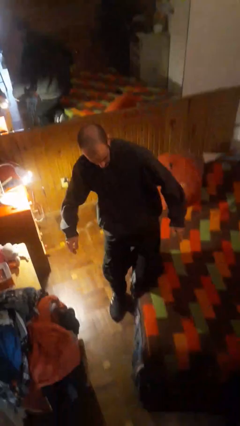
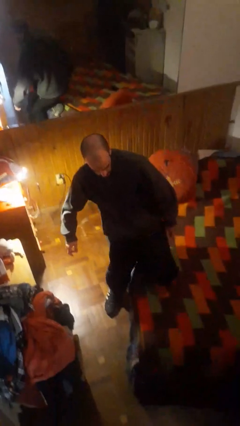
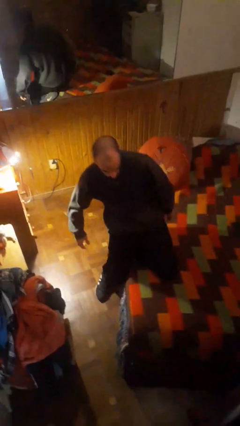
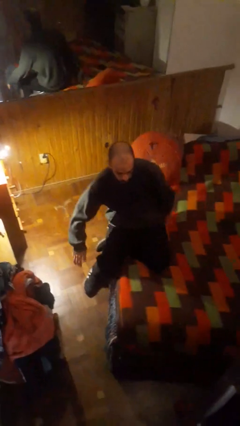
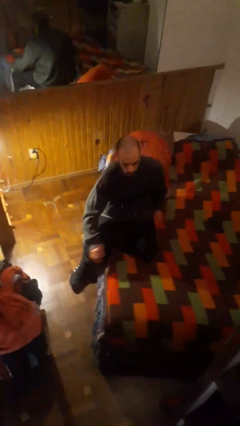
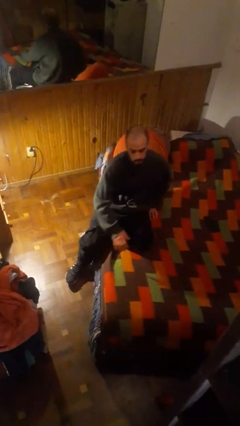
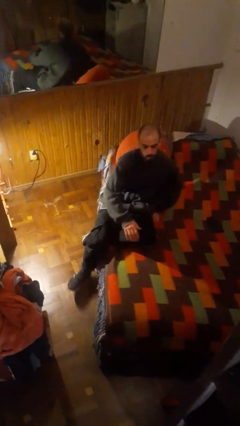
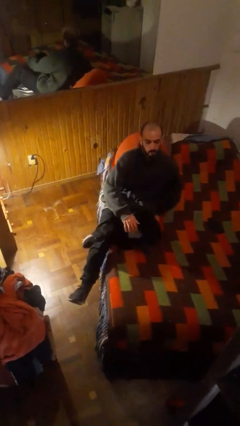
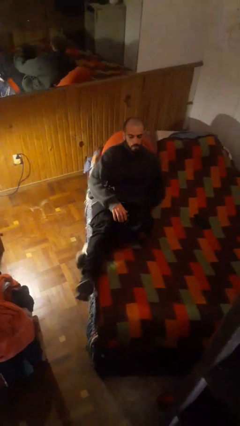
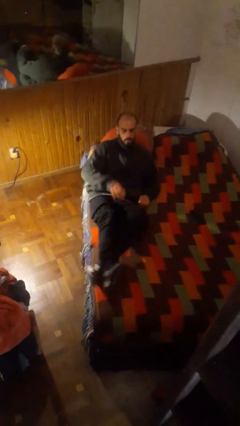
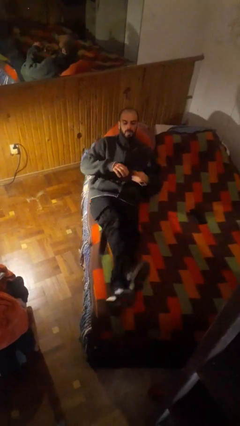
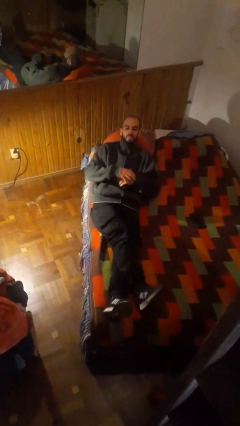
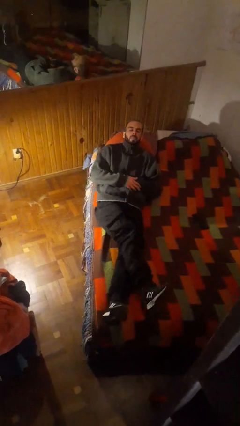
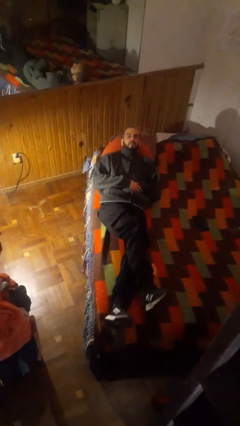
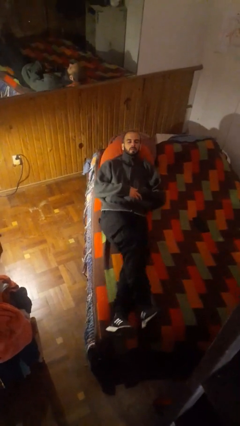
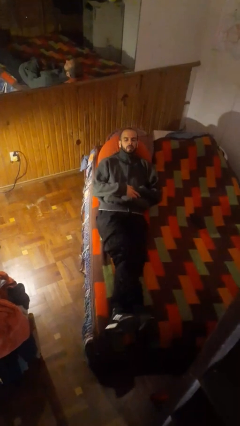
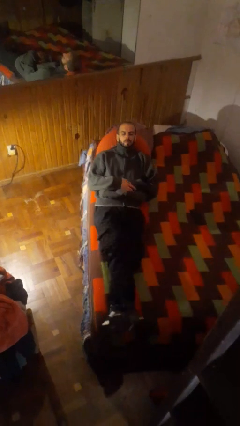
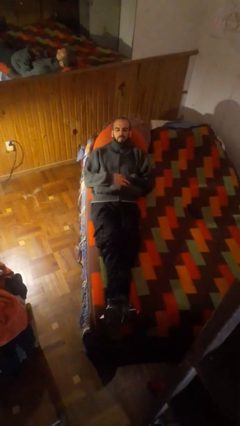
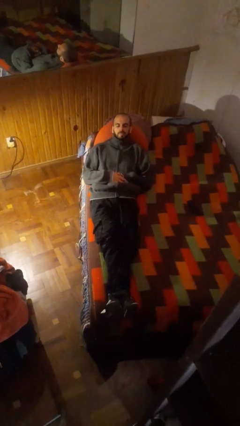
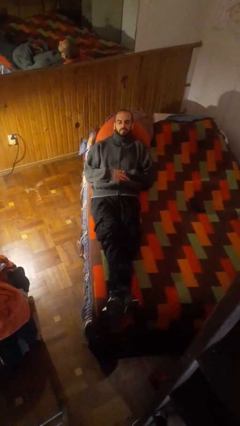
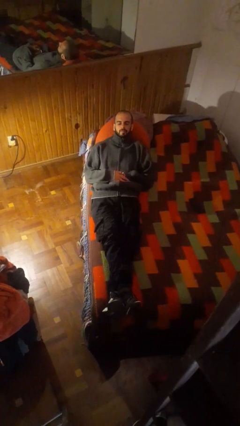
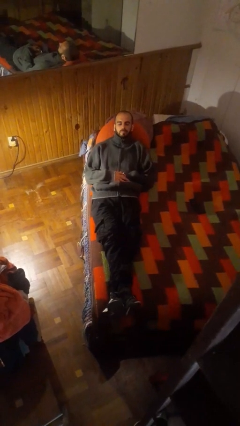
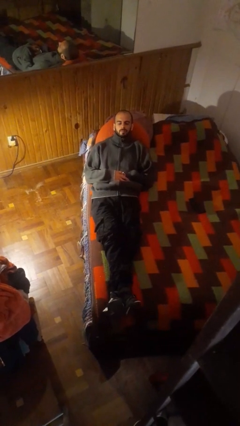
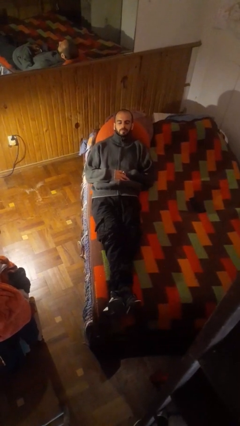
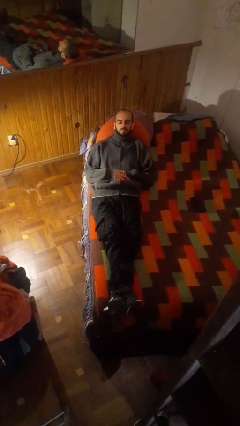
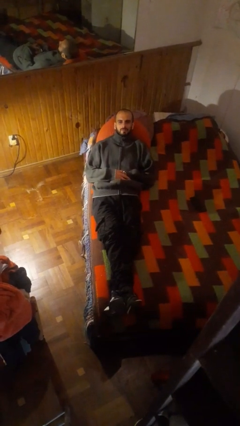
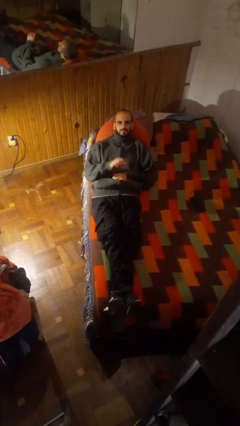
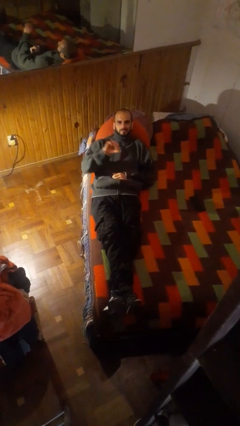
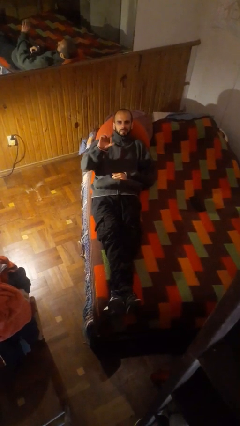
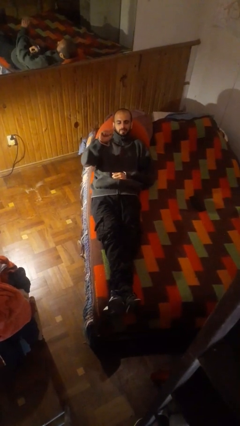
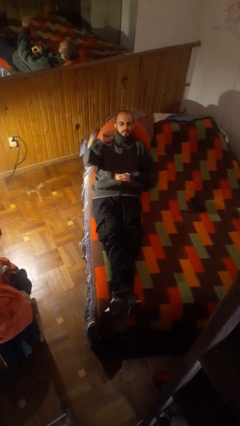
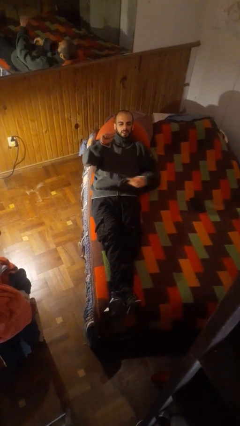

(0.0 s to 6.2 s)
person lies down on bed

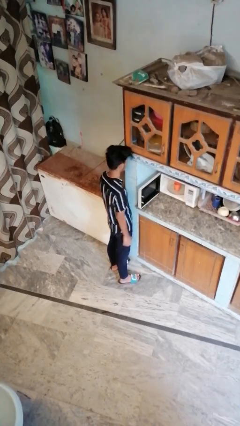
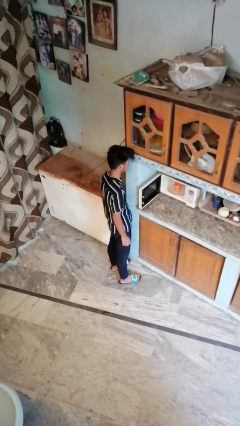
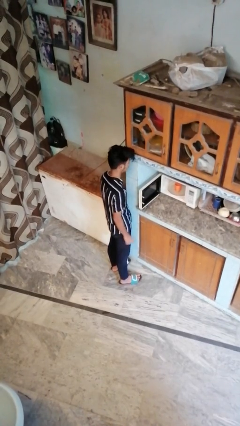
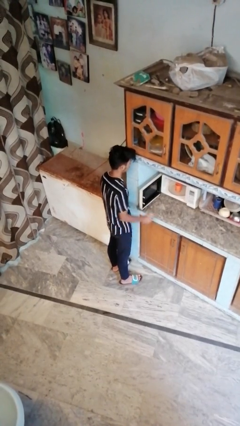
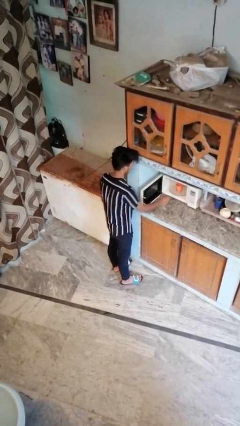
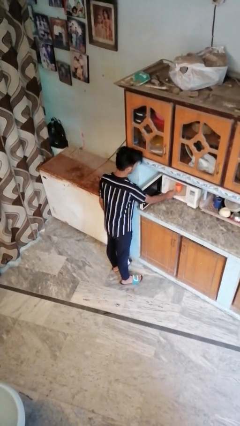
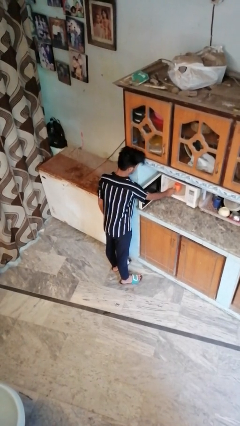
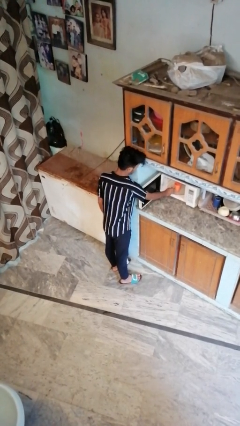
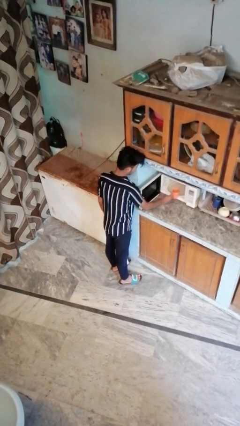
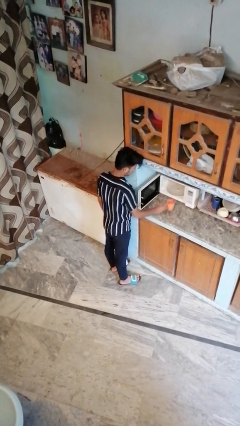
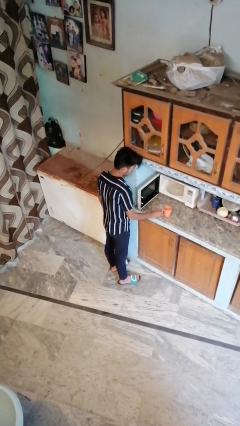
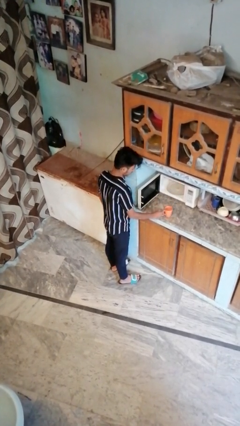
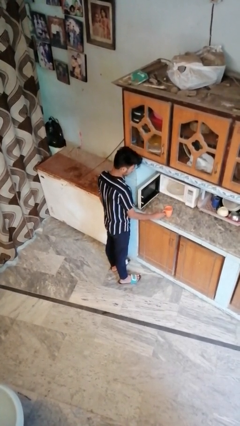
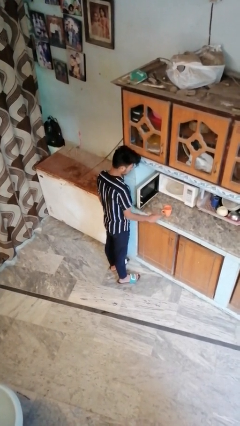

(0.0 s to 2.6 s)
person takes object from microwave

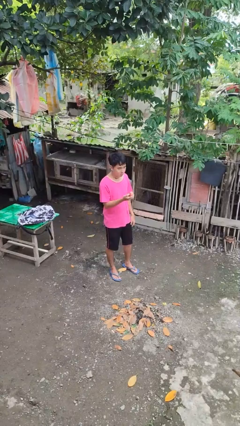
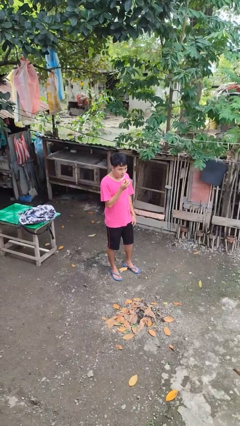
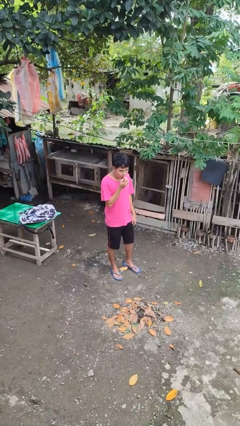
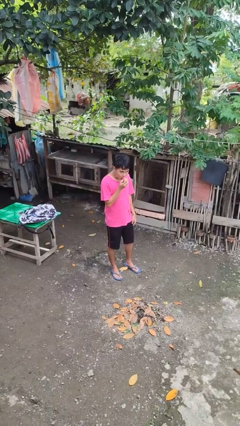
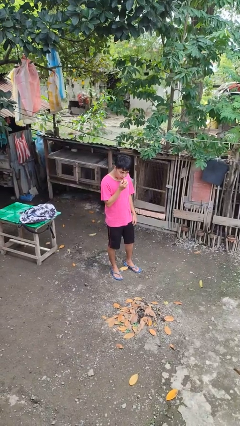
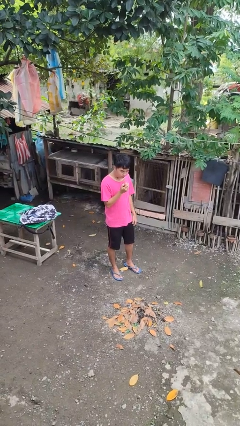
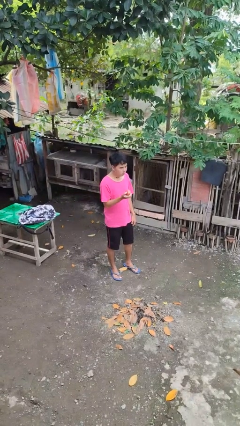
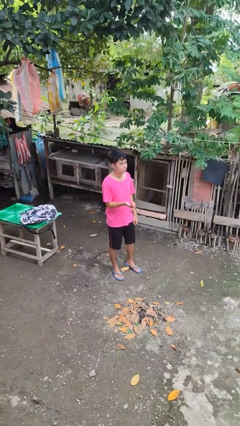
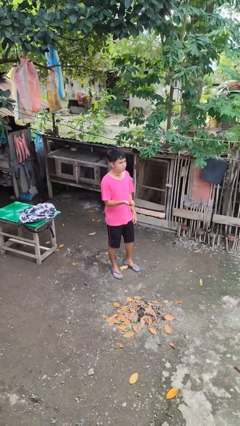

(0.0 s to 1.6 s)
person eats apple

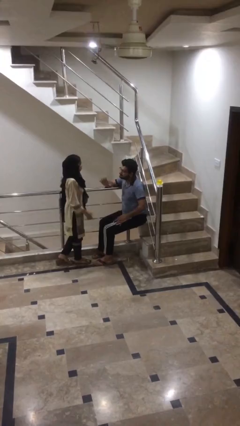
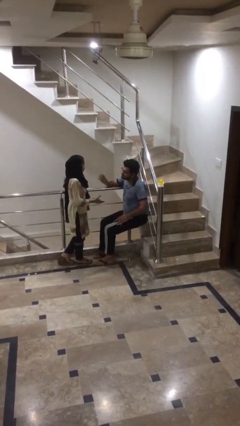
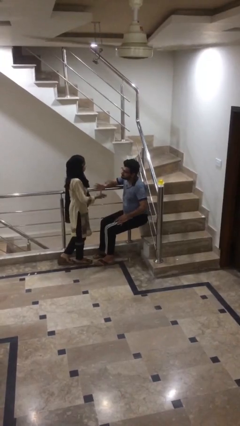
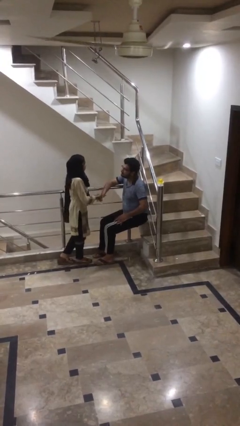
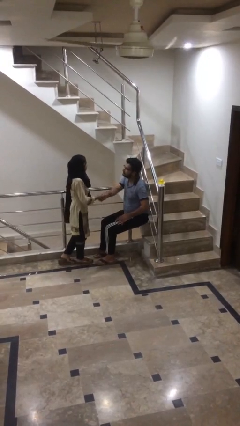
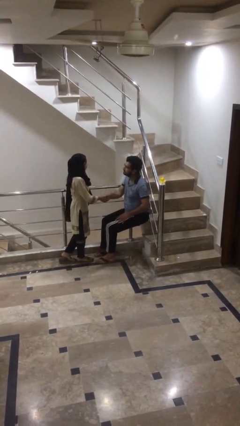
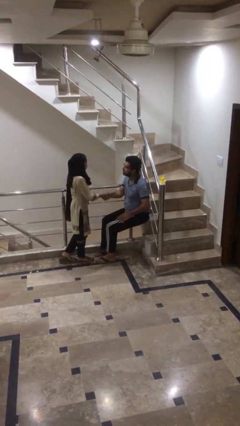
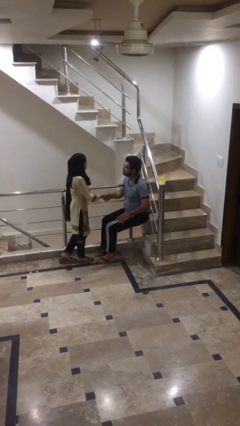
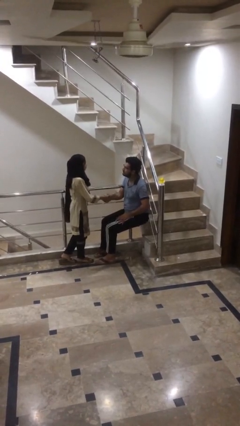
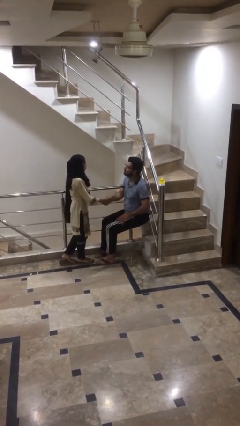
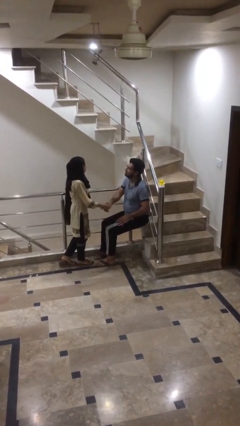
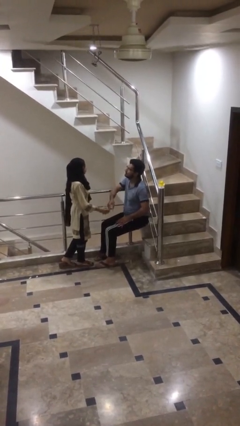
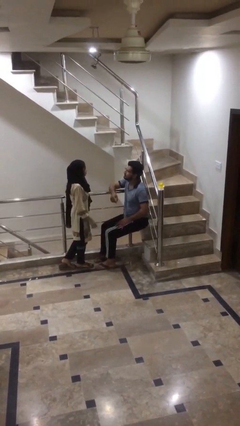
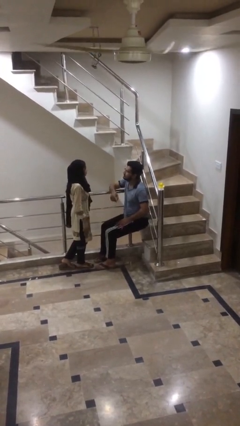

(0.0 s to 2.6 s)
person shakes hand

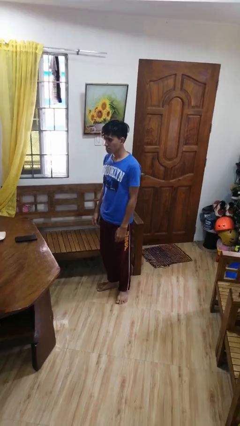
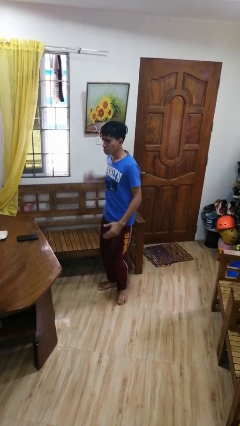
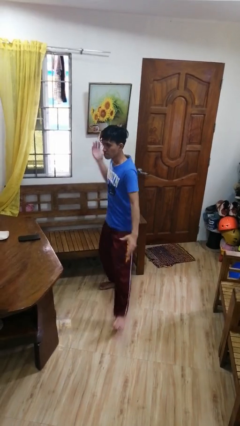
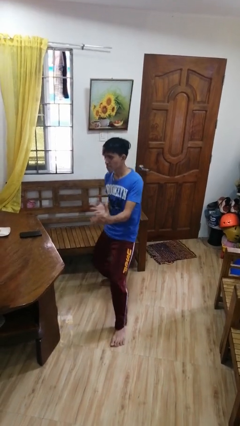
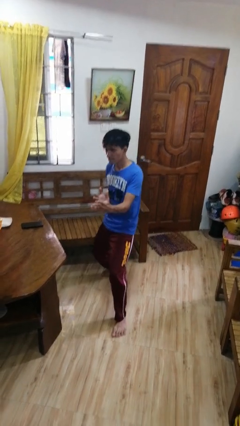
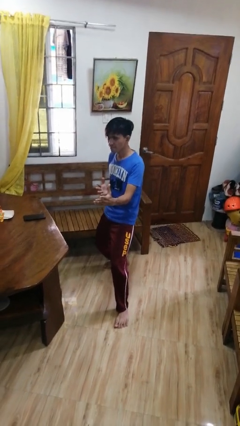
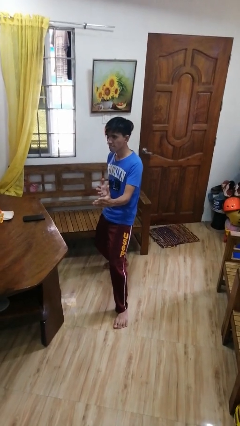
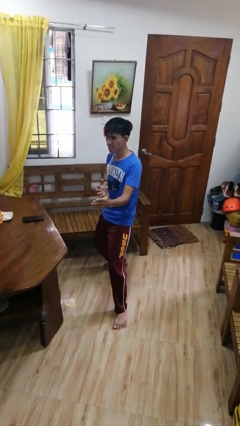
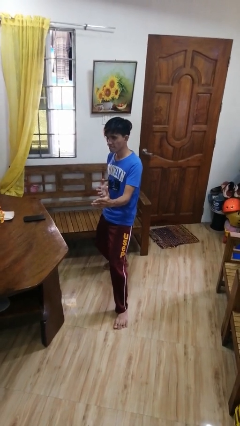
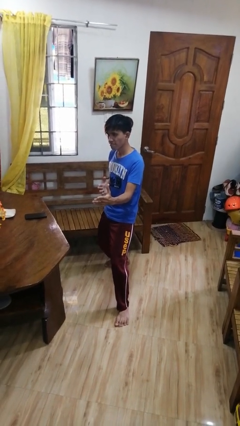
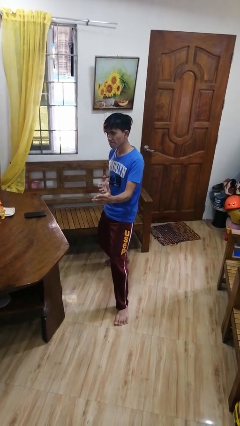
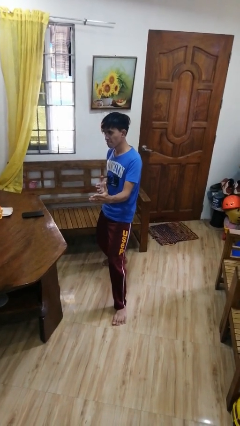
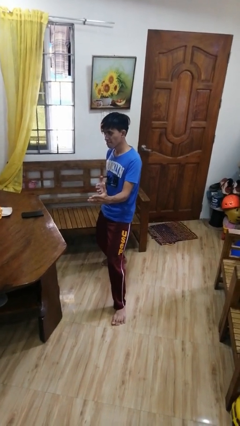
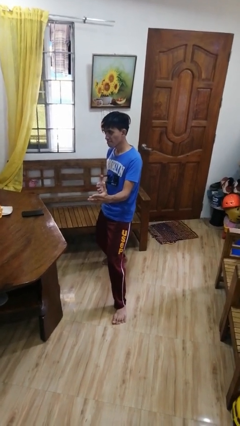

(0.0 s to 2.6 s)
person karate chop

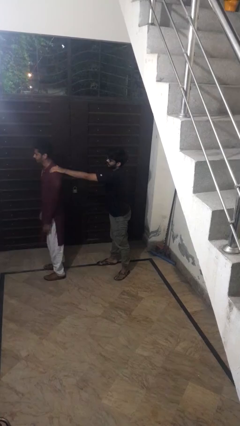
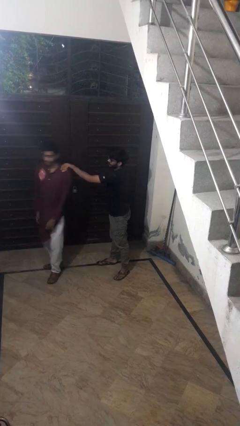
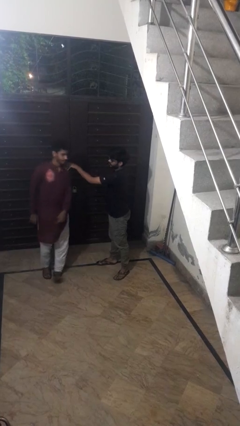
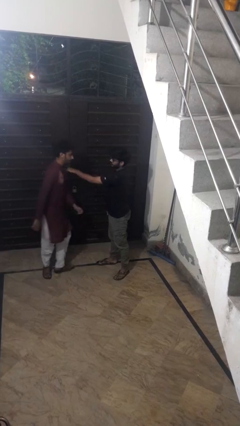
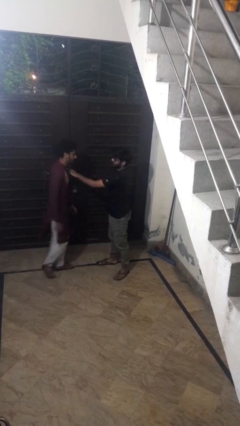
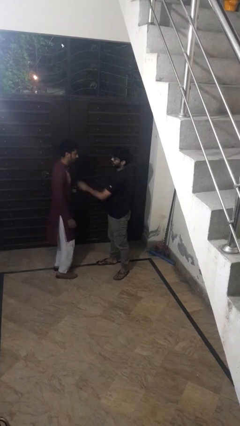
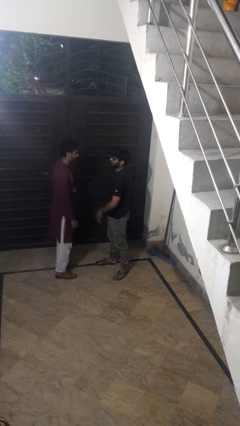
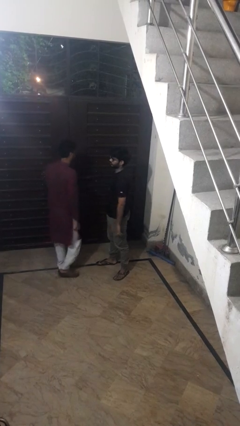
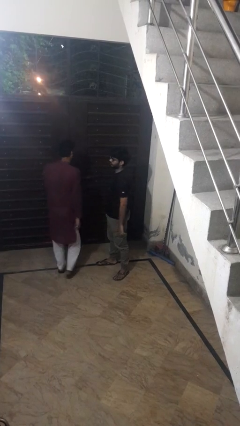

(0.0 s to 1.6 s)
person spins person around
